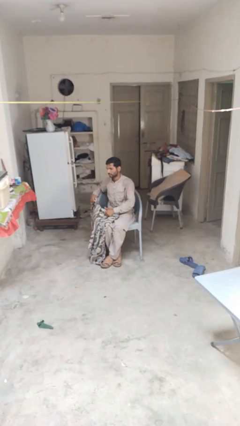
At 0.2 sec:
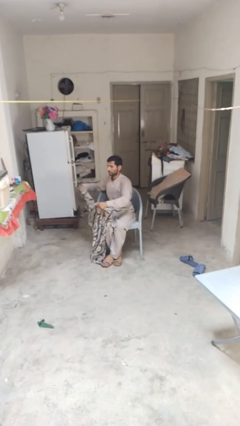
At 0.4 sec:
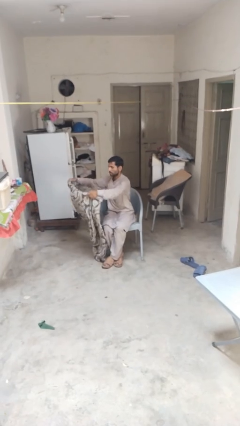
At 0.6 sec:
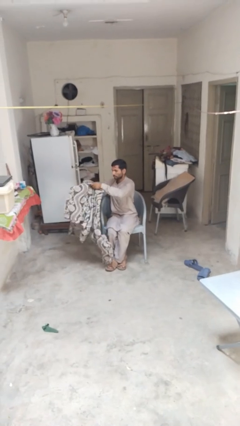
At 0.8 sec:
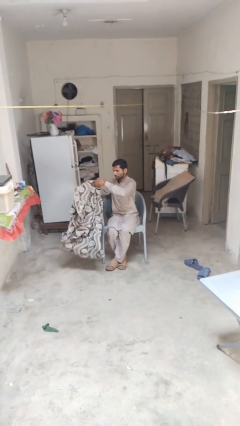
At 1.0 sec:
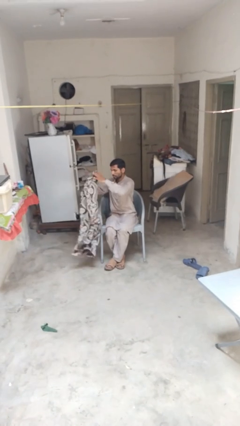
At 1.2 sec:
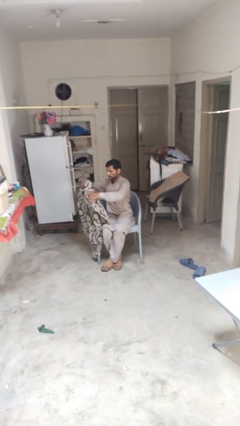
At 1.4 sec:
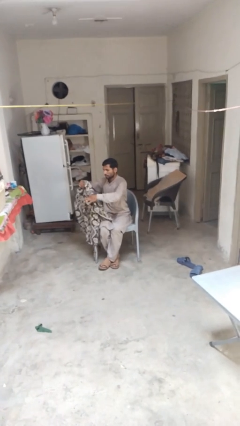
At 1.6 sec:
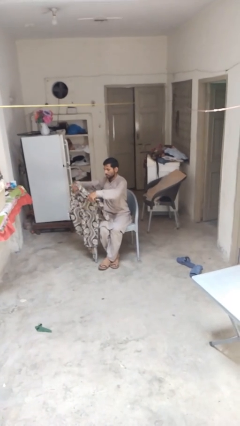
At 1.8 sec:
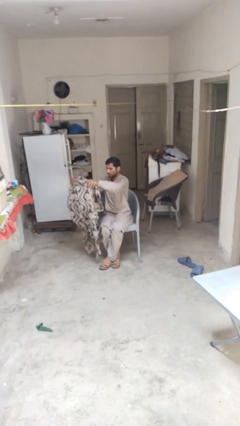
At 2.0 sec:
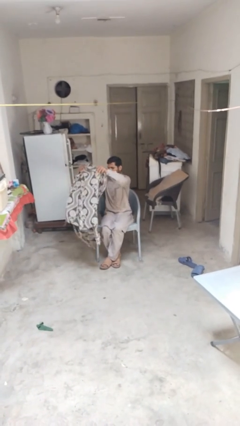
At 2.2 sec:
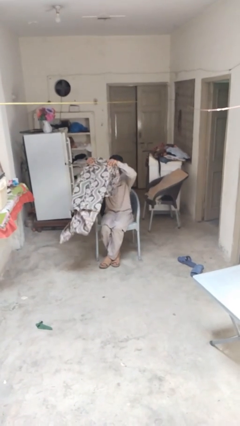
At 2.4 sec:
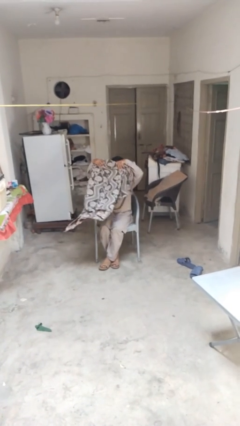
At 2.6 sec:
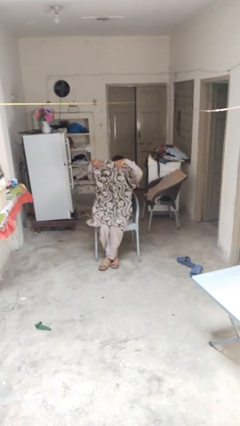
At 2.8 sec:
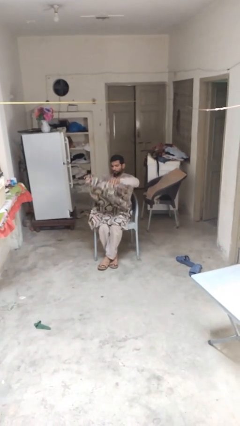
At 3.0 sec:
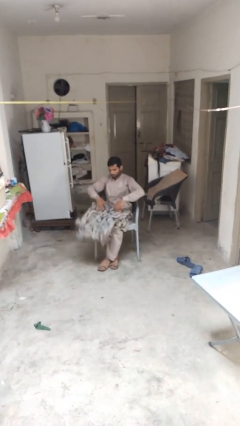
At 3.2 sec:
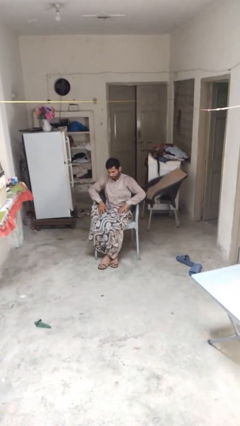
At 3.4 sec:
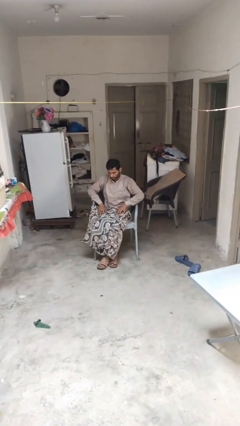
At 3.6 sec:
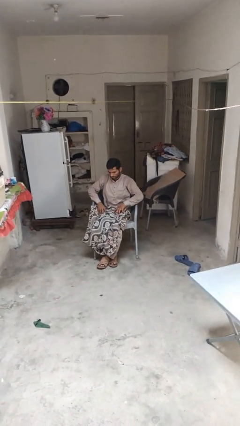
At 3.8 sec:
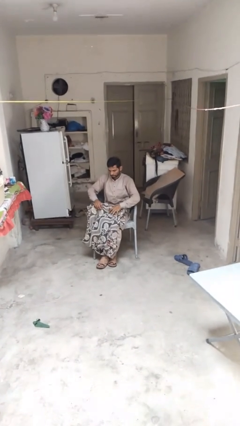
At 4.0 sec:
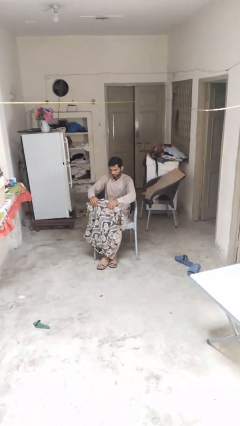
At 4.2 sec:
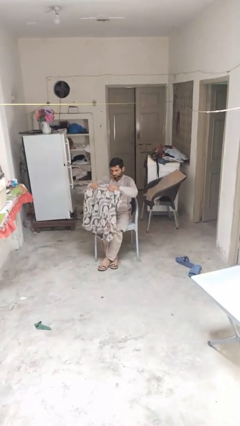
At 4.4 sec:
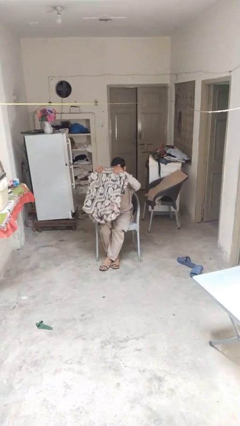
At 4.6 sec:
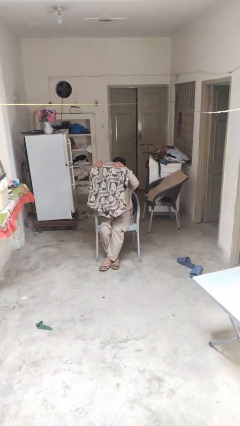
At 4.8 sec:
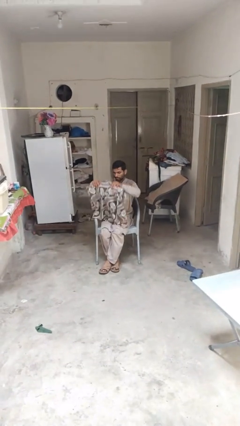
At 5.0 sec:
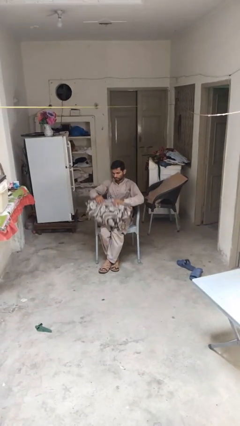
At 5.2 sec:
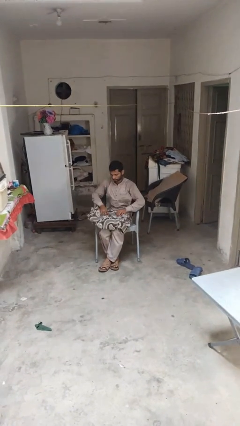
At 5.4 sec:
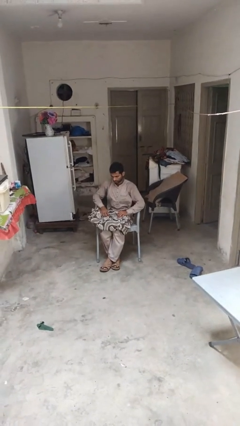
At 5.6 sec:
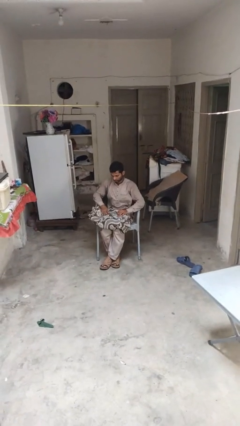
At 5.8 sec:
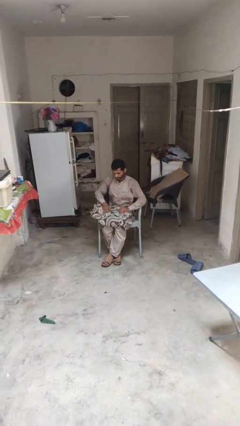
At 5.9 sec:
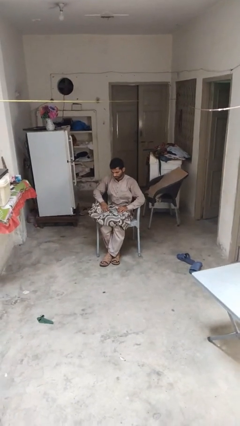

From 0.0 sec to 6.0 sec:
person folds blanket

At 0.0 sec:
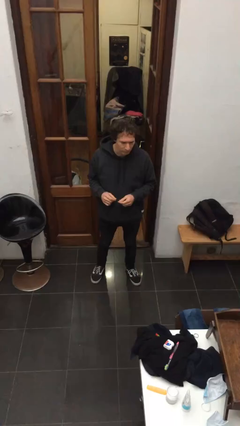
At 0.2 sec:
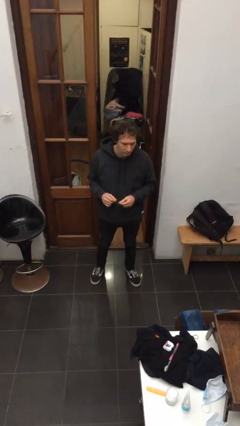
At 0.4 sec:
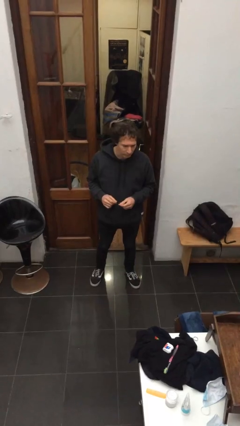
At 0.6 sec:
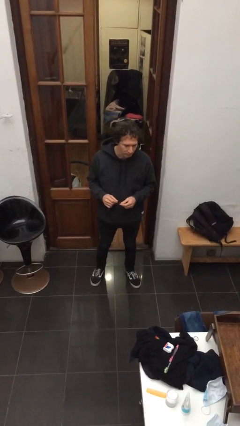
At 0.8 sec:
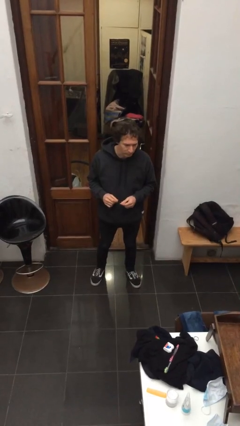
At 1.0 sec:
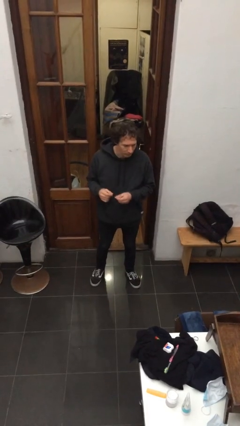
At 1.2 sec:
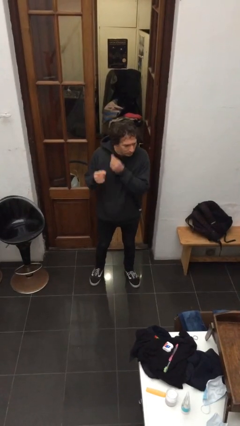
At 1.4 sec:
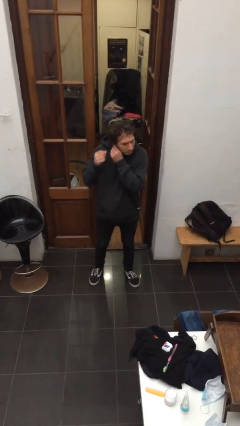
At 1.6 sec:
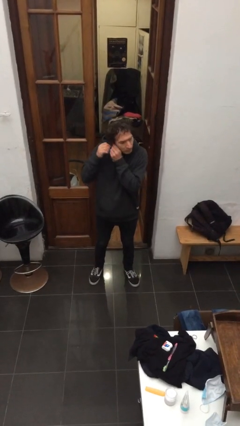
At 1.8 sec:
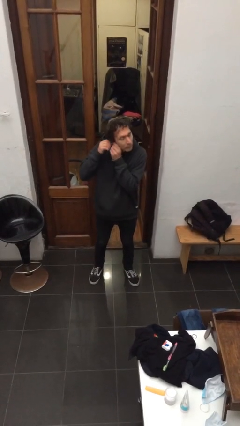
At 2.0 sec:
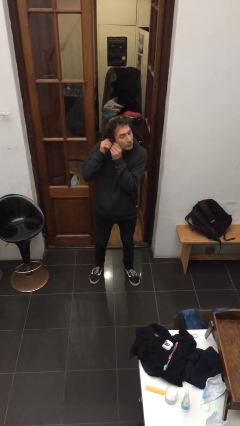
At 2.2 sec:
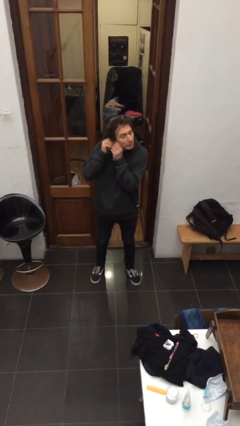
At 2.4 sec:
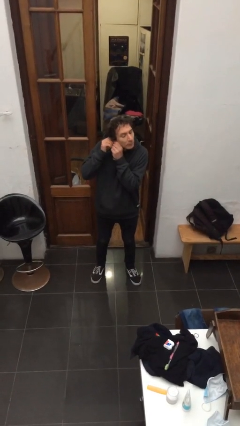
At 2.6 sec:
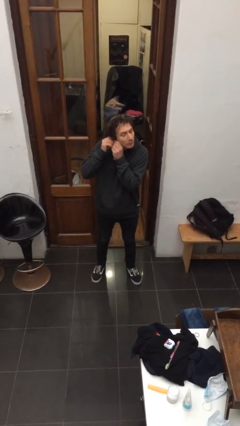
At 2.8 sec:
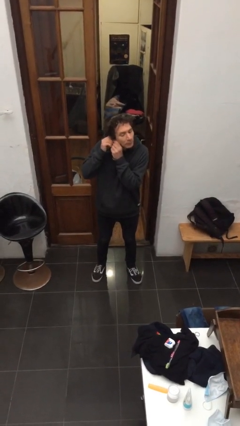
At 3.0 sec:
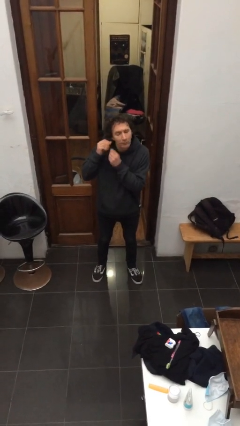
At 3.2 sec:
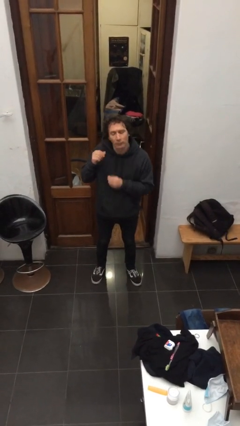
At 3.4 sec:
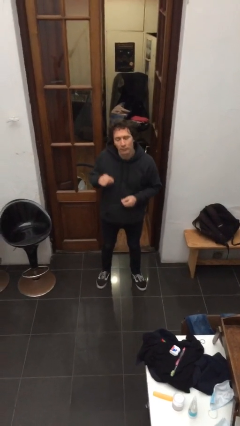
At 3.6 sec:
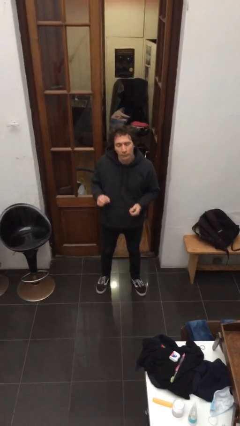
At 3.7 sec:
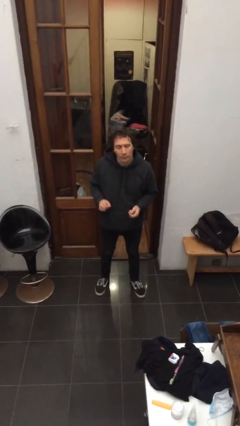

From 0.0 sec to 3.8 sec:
person puts on earrings

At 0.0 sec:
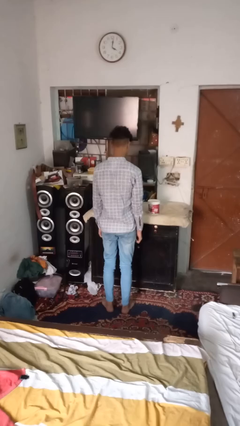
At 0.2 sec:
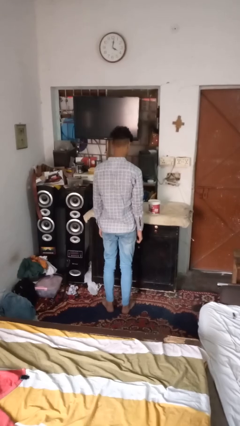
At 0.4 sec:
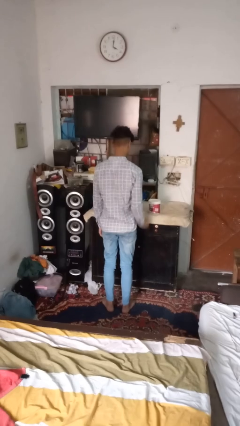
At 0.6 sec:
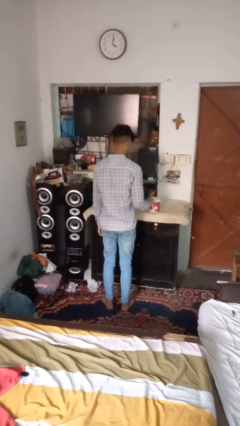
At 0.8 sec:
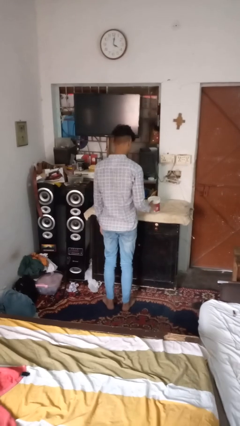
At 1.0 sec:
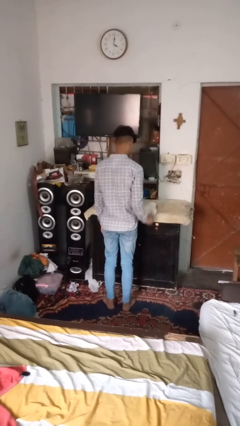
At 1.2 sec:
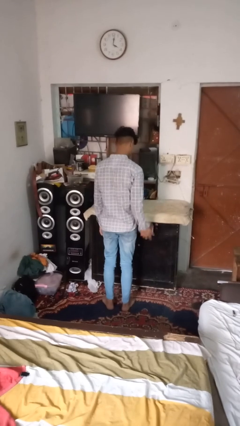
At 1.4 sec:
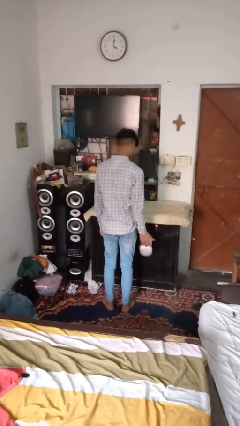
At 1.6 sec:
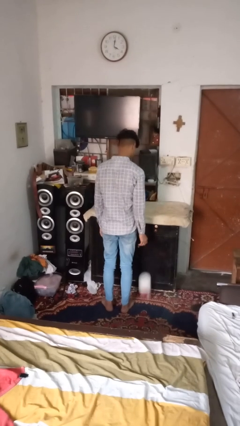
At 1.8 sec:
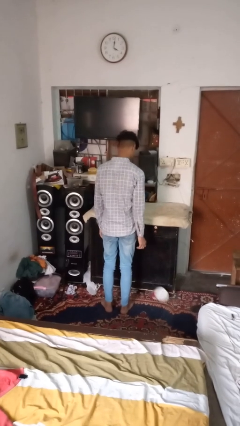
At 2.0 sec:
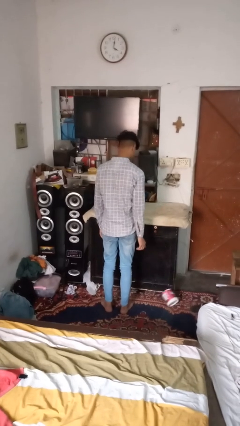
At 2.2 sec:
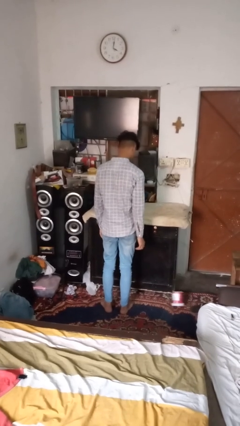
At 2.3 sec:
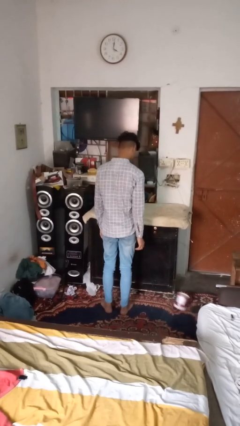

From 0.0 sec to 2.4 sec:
person knocks over furniture

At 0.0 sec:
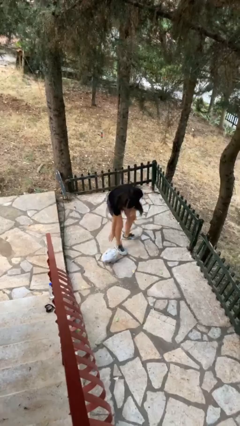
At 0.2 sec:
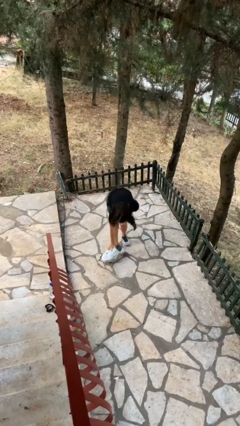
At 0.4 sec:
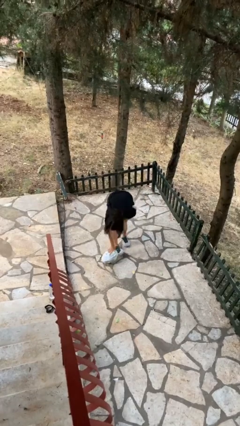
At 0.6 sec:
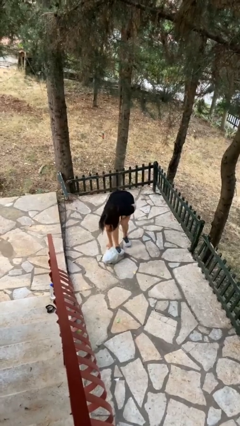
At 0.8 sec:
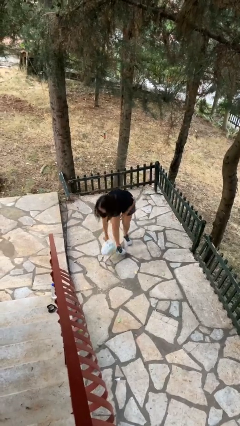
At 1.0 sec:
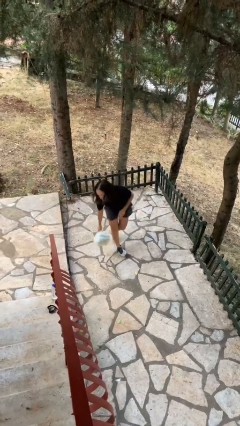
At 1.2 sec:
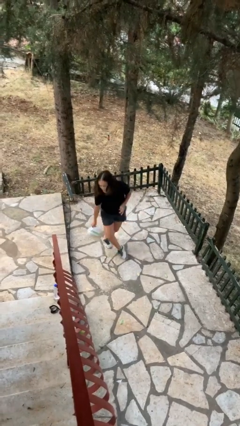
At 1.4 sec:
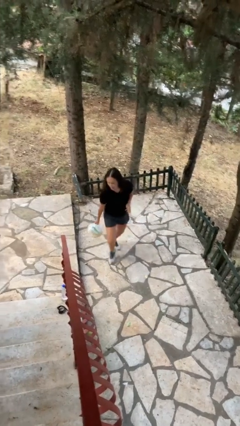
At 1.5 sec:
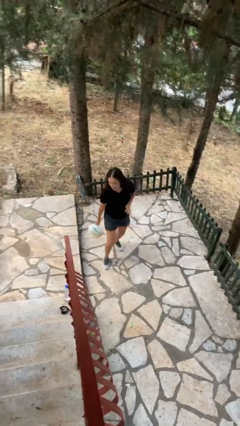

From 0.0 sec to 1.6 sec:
person picks up object from floor

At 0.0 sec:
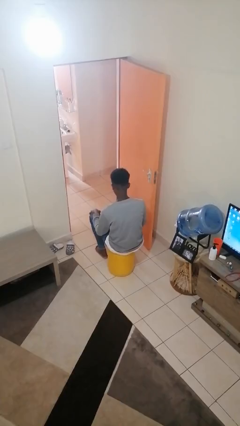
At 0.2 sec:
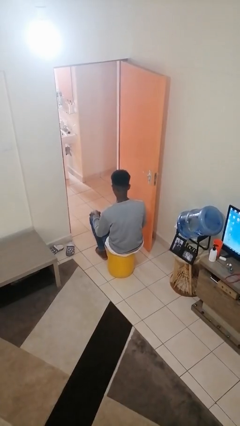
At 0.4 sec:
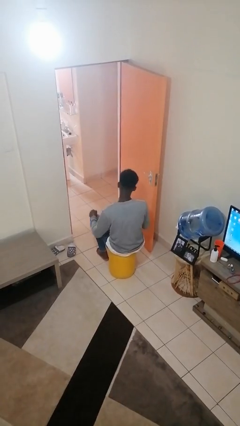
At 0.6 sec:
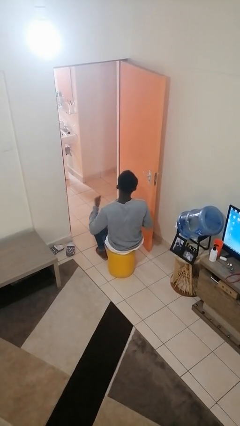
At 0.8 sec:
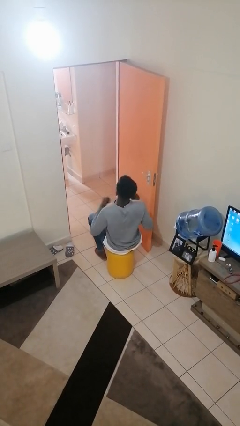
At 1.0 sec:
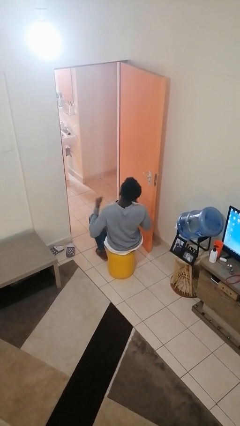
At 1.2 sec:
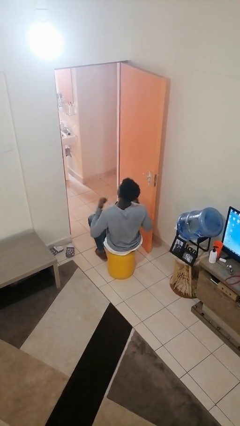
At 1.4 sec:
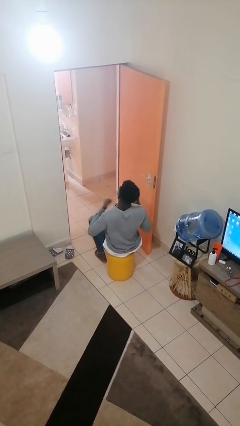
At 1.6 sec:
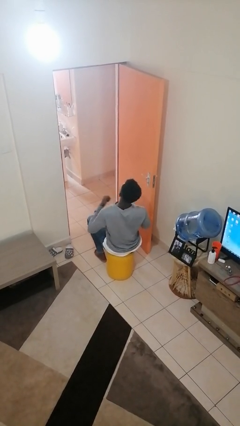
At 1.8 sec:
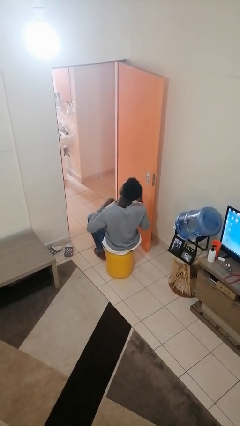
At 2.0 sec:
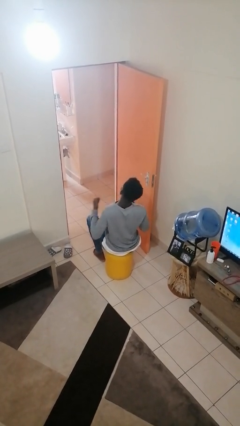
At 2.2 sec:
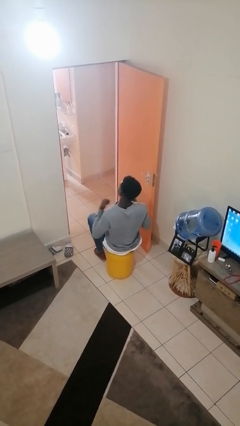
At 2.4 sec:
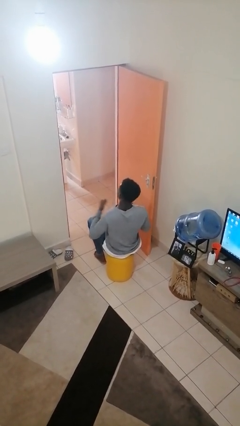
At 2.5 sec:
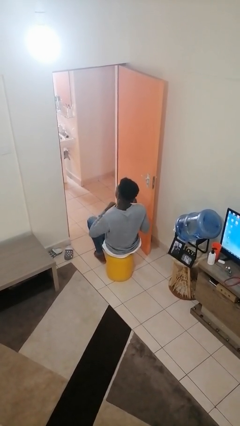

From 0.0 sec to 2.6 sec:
person drums on chest

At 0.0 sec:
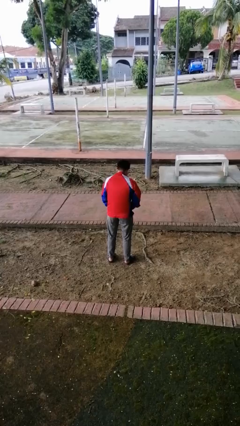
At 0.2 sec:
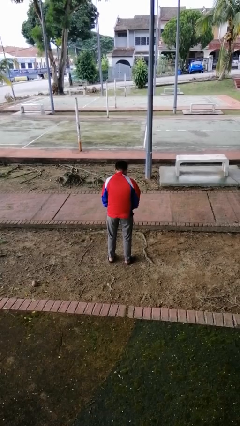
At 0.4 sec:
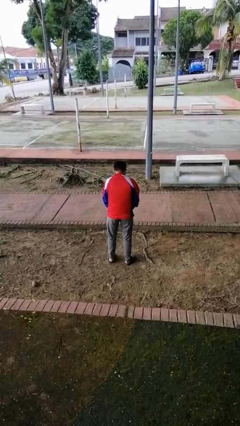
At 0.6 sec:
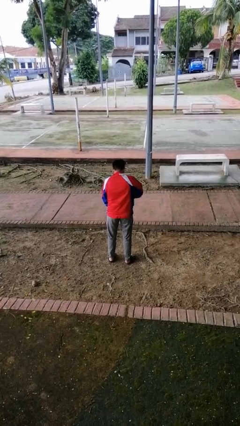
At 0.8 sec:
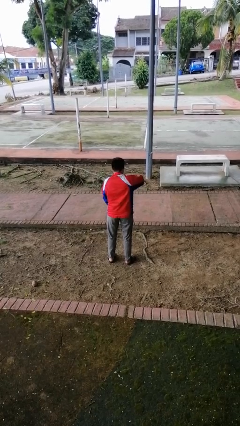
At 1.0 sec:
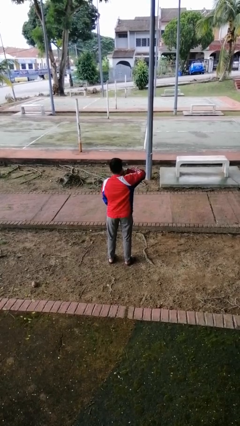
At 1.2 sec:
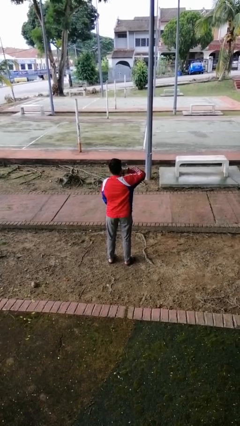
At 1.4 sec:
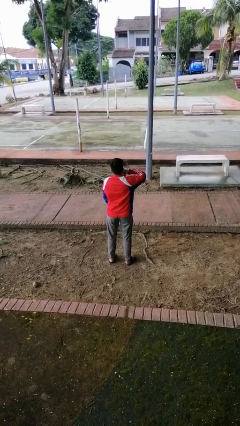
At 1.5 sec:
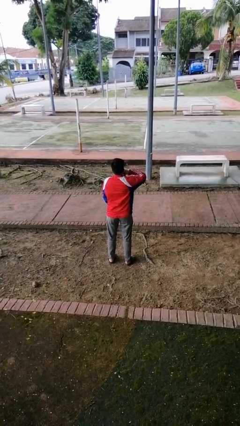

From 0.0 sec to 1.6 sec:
person zips up jacket
